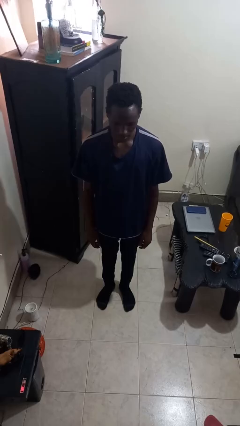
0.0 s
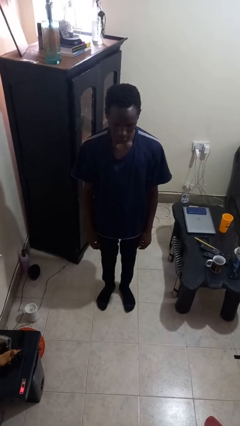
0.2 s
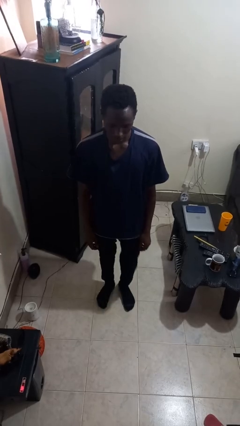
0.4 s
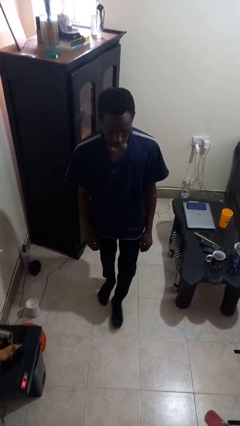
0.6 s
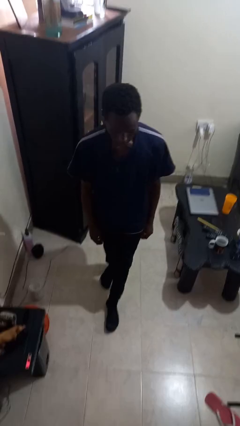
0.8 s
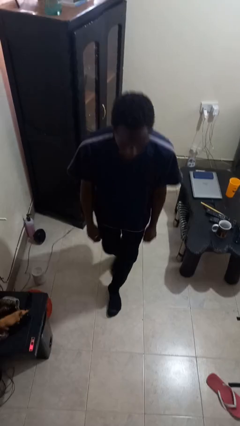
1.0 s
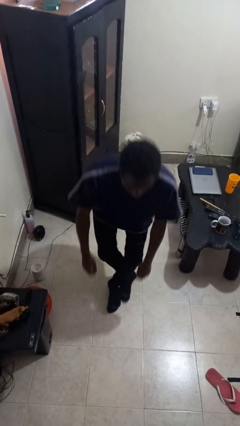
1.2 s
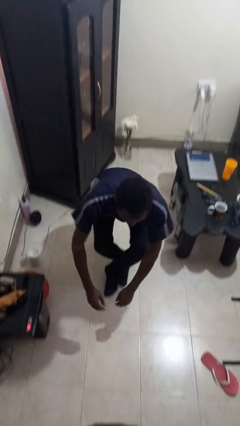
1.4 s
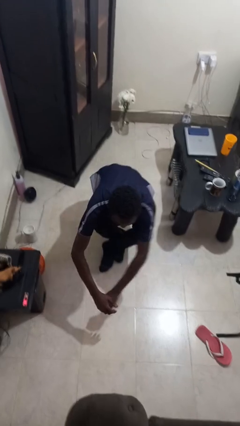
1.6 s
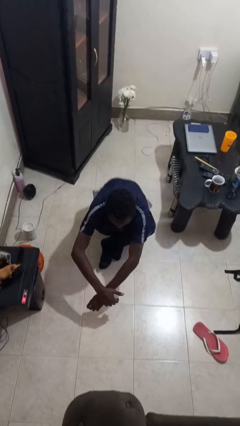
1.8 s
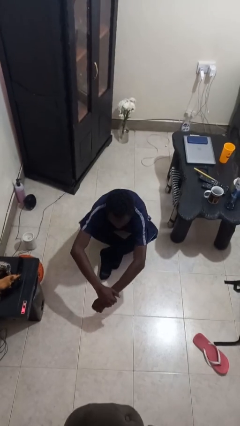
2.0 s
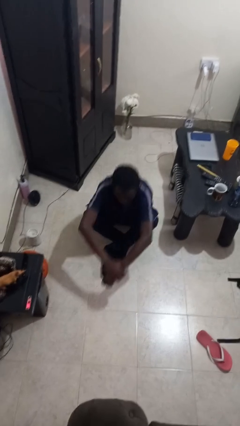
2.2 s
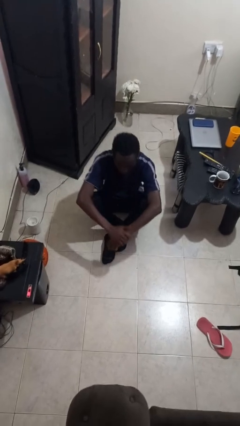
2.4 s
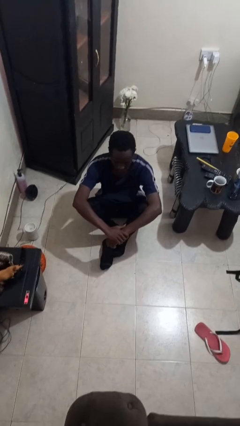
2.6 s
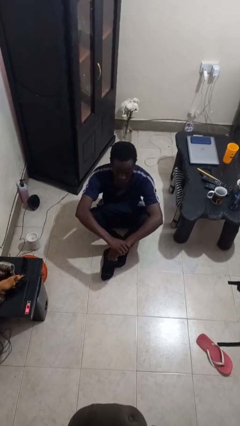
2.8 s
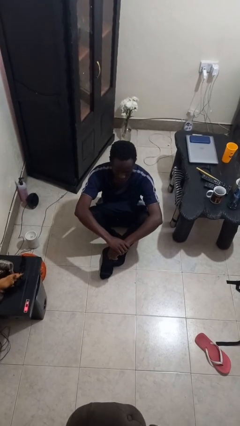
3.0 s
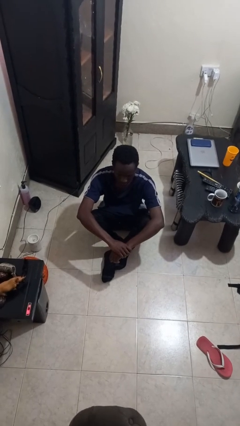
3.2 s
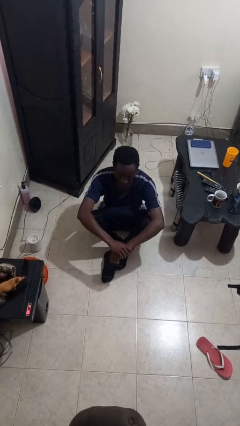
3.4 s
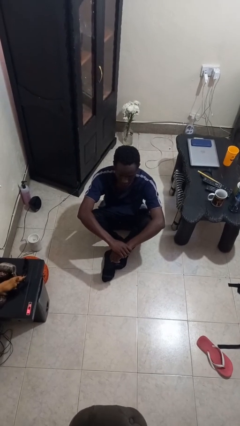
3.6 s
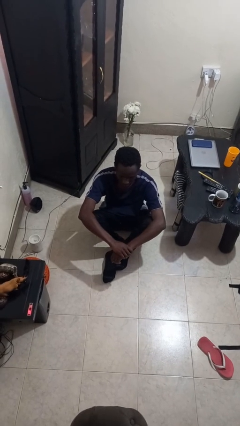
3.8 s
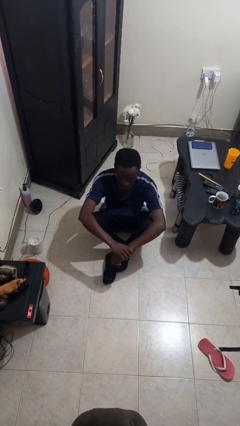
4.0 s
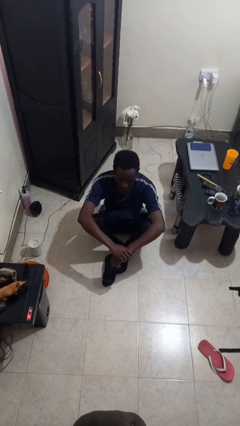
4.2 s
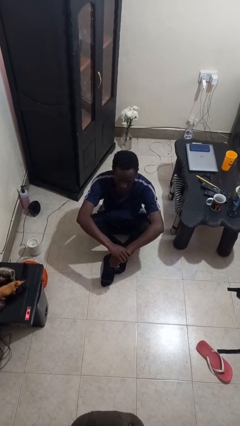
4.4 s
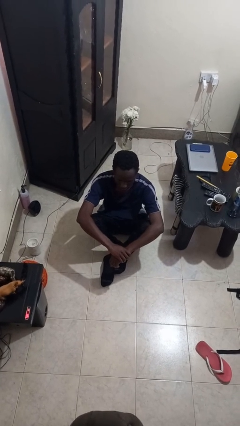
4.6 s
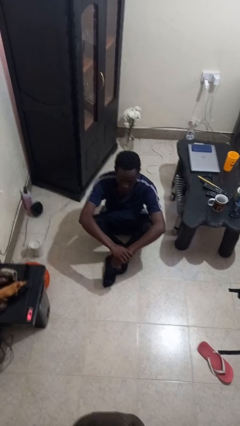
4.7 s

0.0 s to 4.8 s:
person sits crisscross

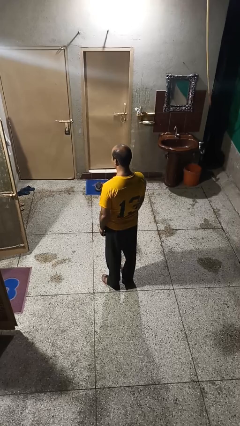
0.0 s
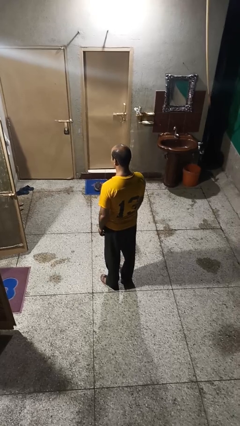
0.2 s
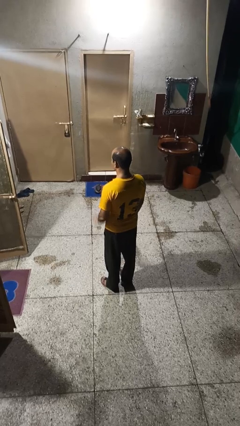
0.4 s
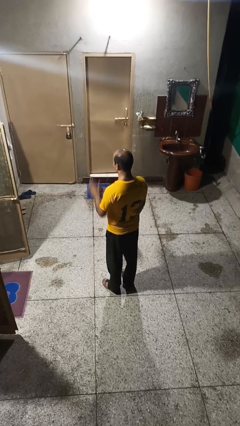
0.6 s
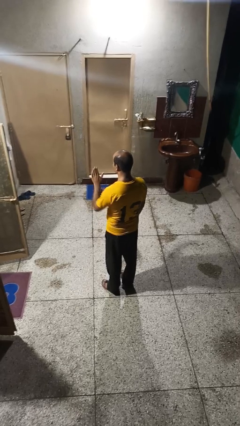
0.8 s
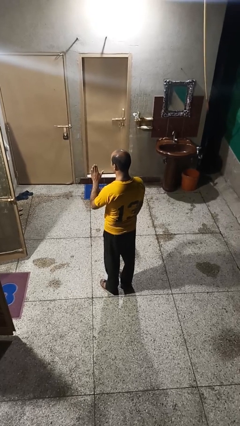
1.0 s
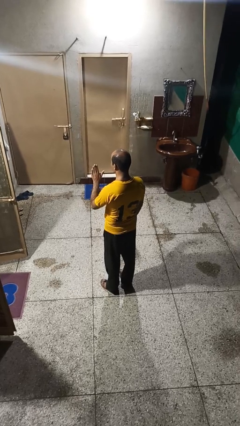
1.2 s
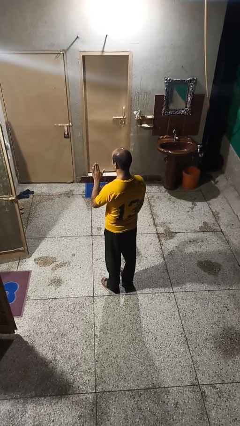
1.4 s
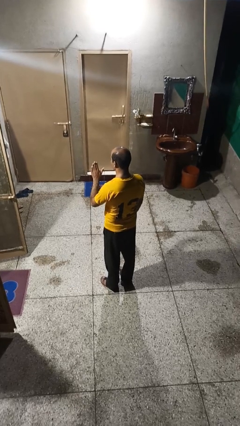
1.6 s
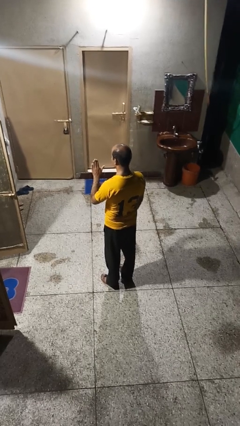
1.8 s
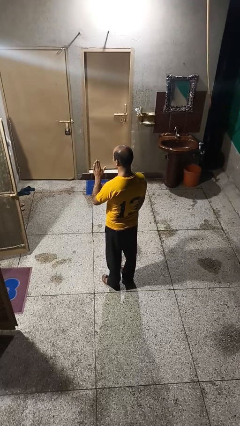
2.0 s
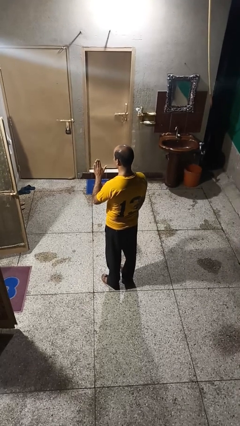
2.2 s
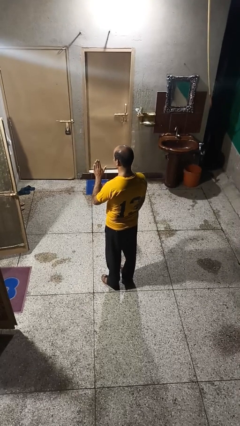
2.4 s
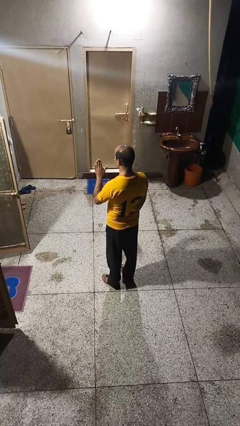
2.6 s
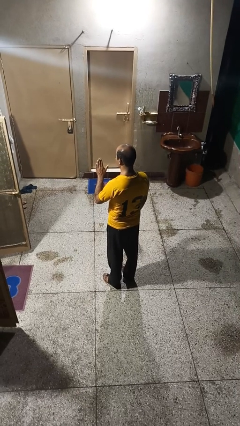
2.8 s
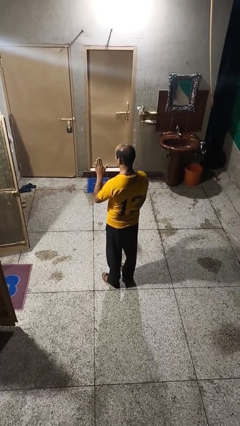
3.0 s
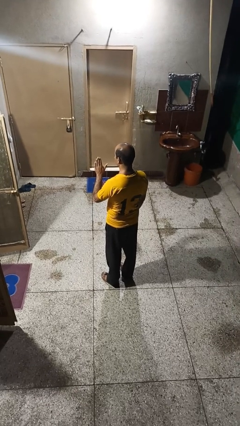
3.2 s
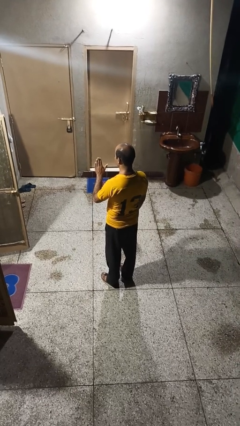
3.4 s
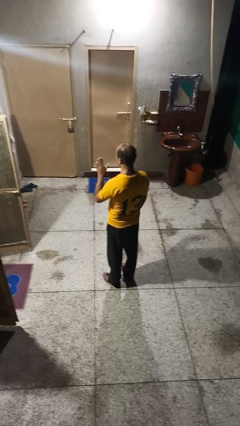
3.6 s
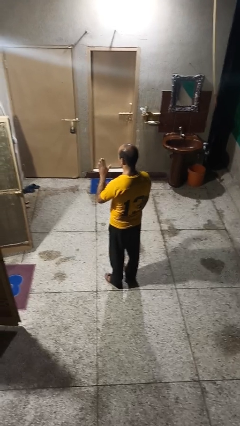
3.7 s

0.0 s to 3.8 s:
person gestures stop

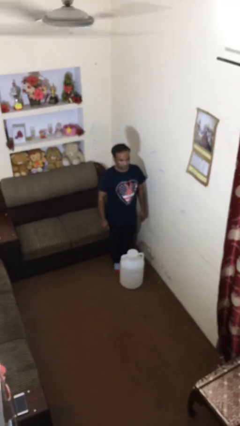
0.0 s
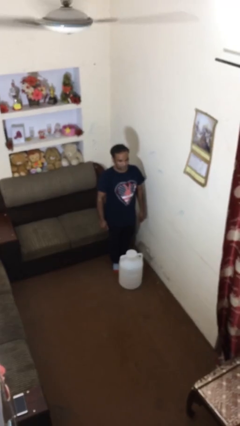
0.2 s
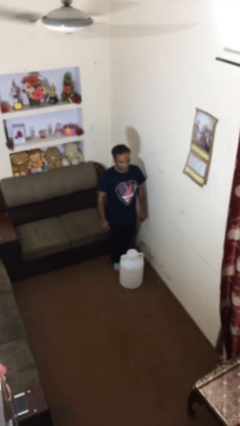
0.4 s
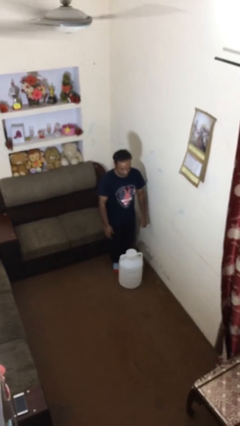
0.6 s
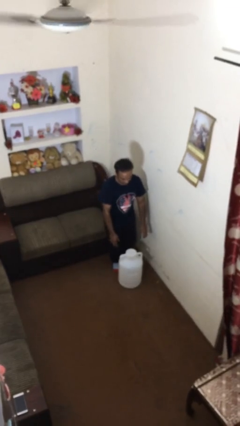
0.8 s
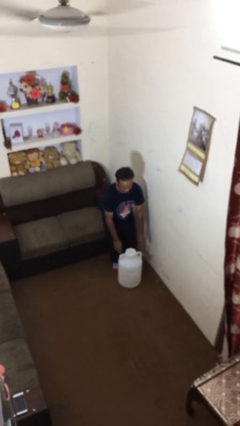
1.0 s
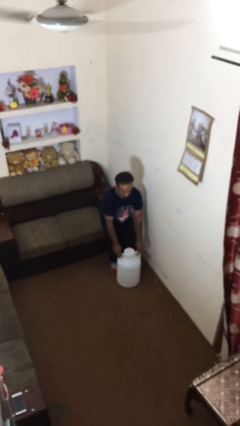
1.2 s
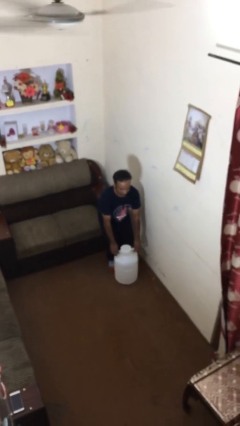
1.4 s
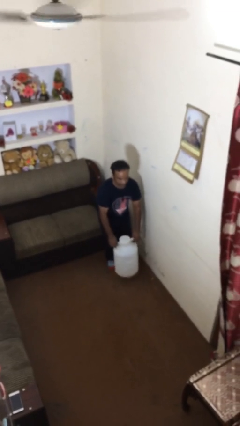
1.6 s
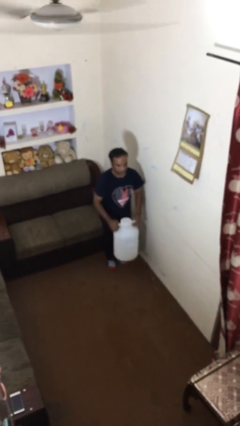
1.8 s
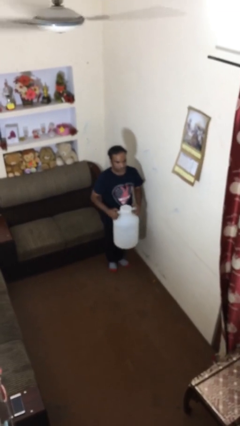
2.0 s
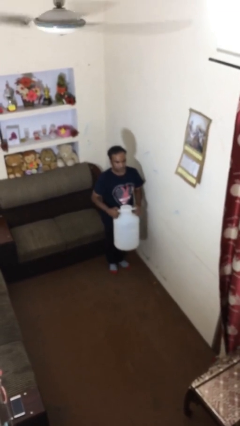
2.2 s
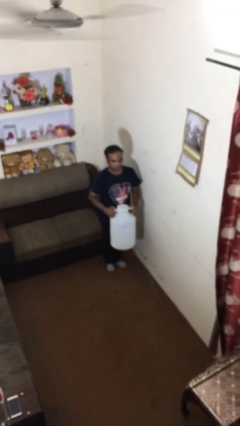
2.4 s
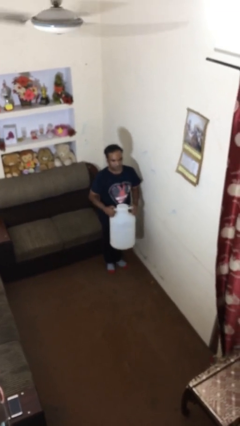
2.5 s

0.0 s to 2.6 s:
person picks up object from floor

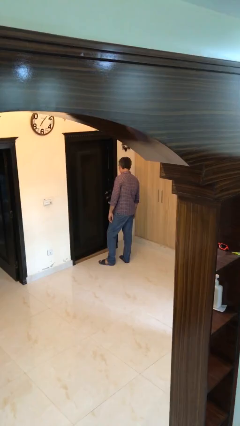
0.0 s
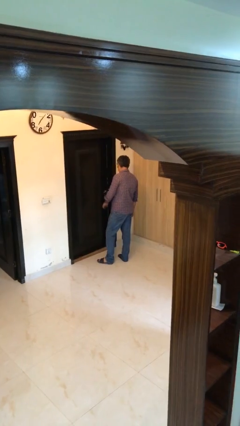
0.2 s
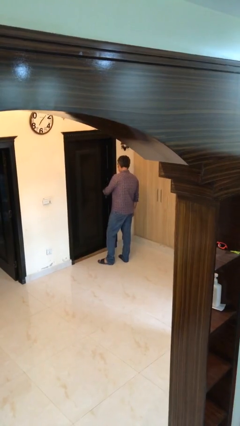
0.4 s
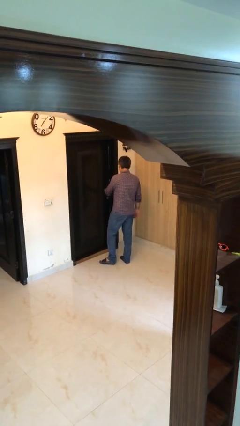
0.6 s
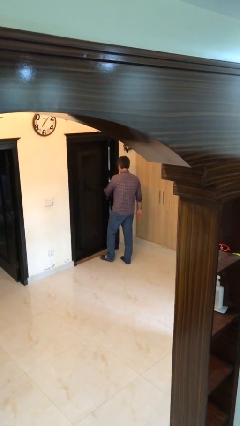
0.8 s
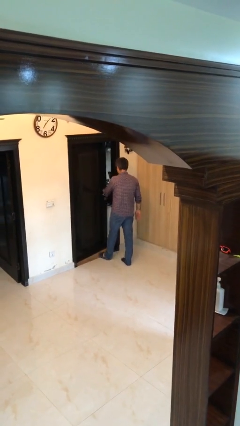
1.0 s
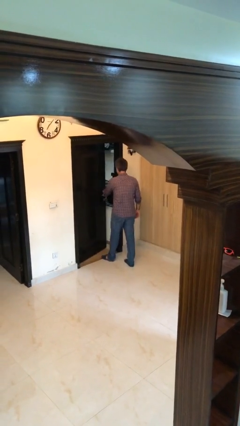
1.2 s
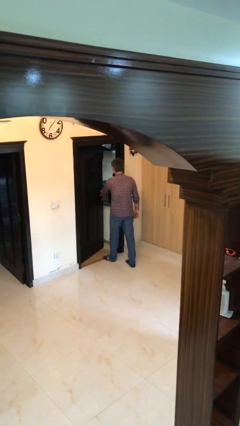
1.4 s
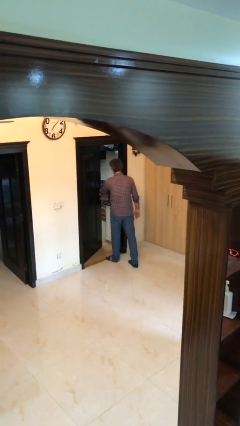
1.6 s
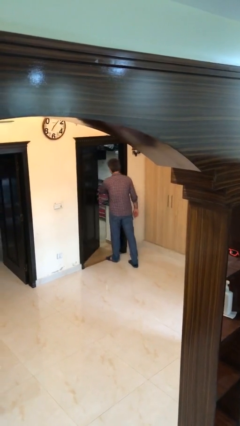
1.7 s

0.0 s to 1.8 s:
person opens facility door

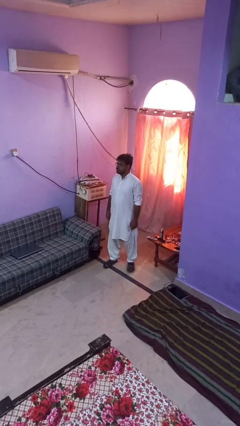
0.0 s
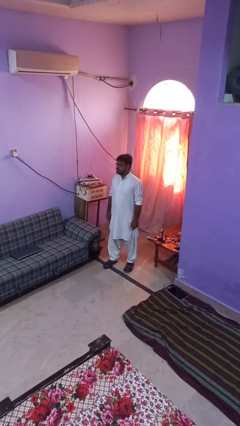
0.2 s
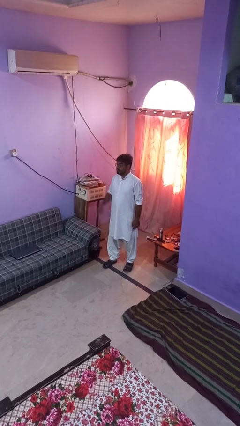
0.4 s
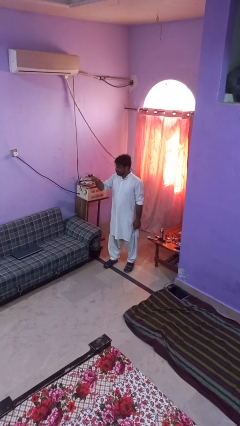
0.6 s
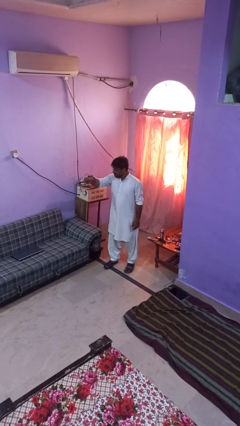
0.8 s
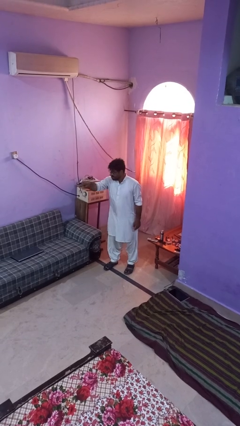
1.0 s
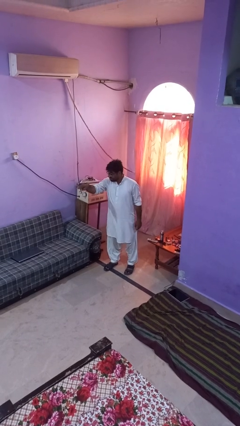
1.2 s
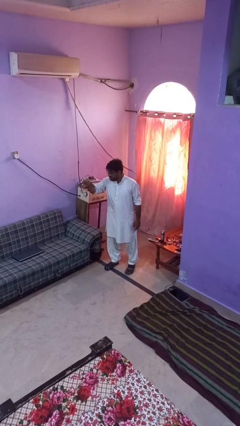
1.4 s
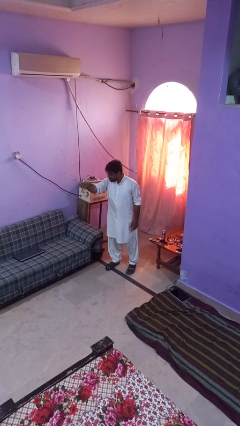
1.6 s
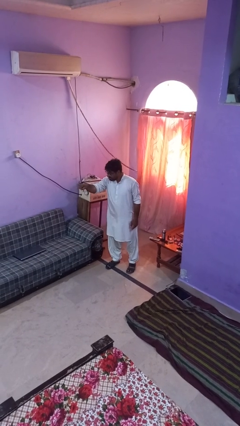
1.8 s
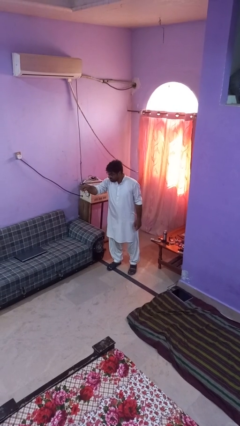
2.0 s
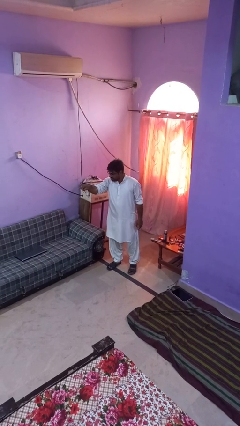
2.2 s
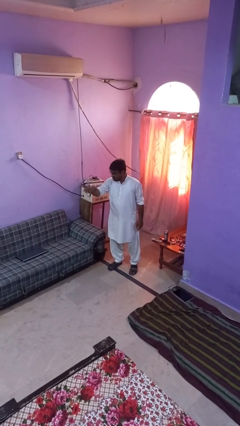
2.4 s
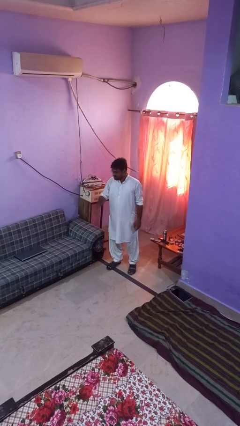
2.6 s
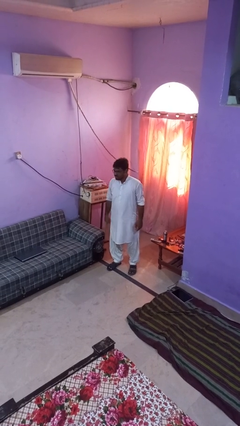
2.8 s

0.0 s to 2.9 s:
person points at person

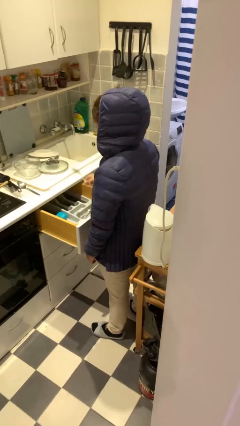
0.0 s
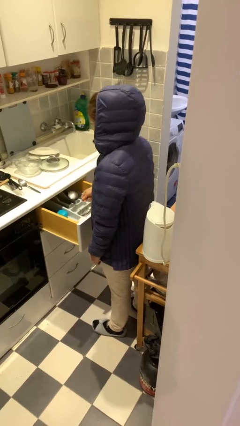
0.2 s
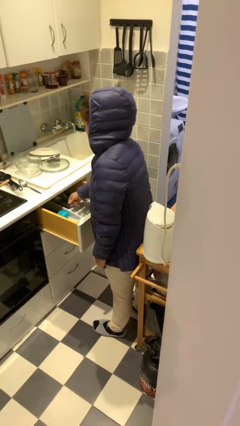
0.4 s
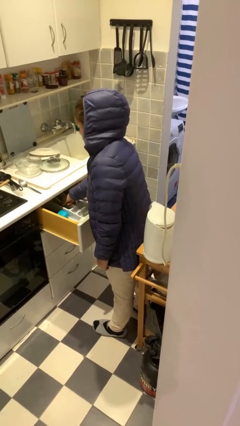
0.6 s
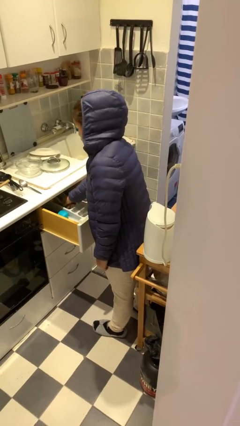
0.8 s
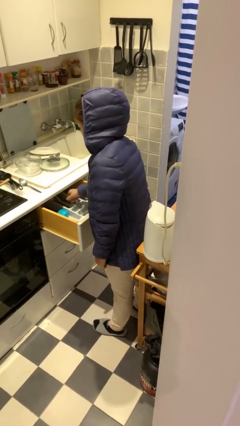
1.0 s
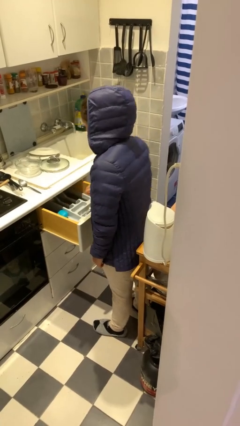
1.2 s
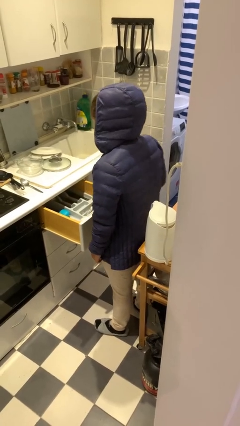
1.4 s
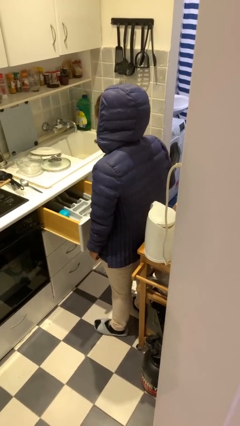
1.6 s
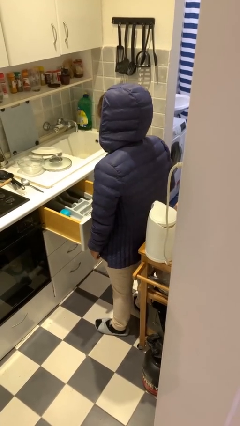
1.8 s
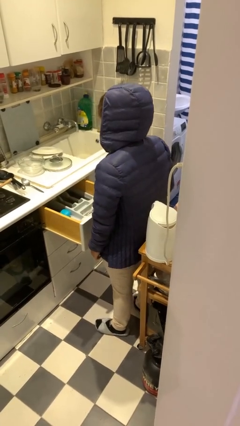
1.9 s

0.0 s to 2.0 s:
person puts object into kitchen drawer
